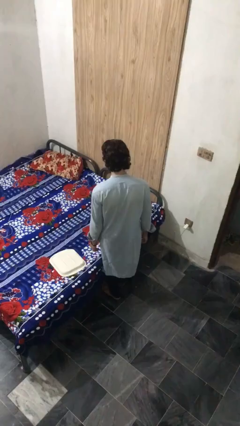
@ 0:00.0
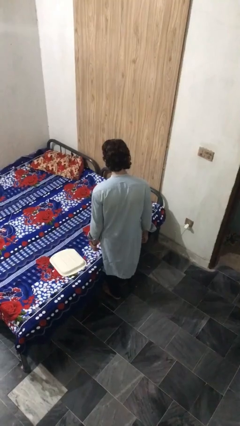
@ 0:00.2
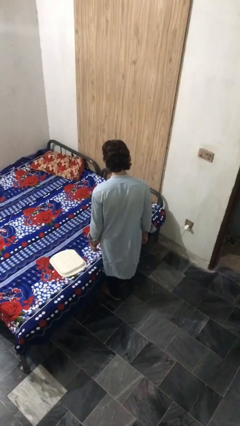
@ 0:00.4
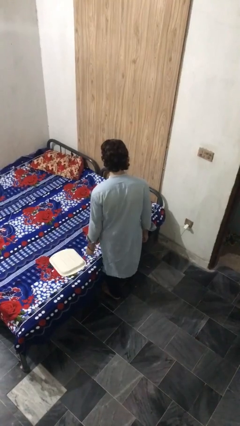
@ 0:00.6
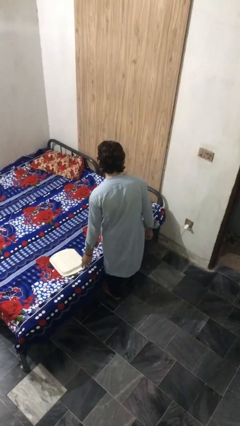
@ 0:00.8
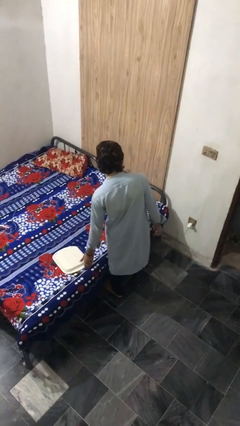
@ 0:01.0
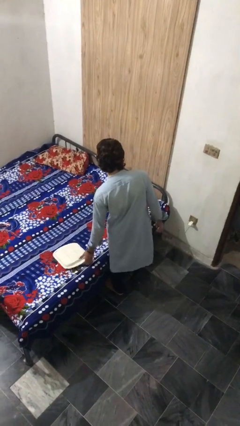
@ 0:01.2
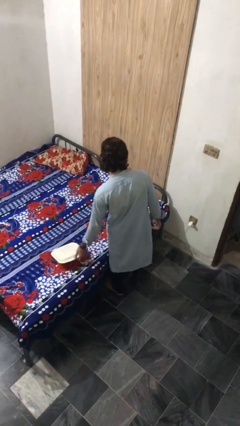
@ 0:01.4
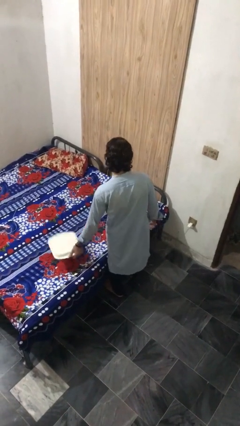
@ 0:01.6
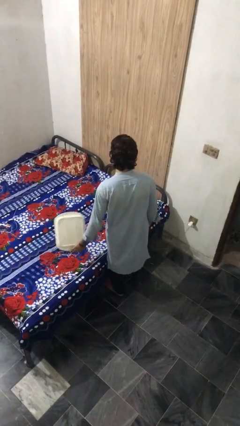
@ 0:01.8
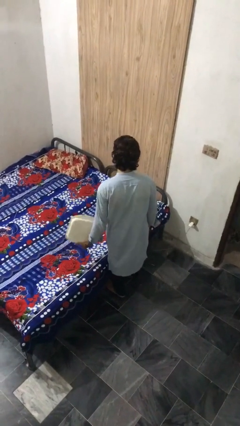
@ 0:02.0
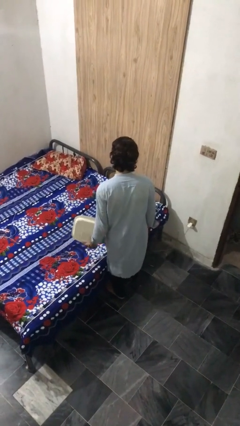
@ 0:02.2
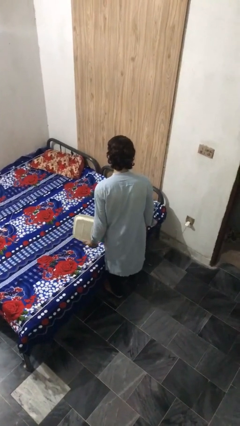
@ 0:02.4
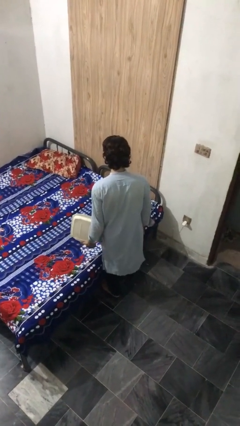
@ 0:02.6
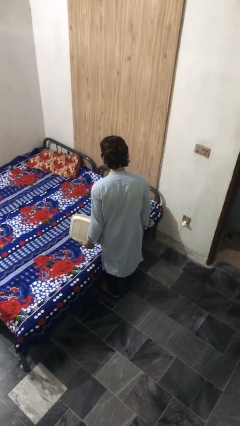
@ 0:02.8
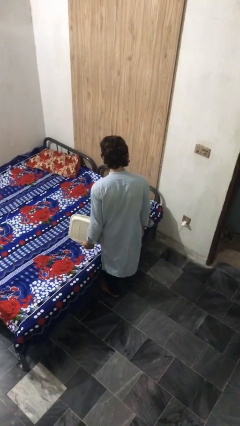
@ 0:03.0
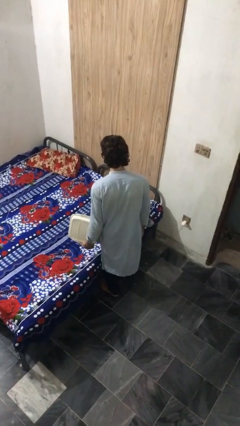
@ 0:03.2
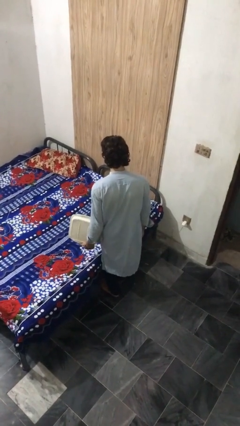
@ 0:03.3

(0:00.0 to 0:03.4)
person picks up object from bed

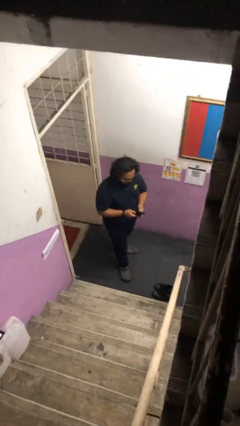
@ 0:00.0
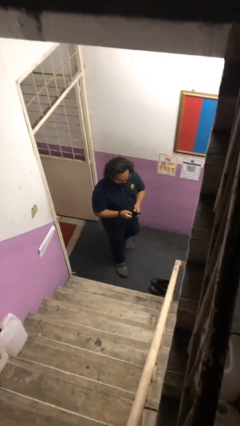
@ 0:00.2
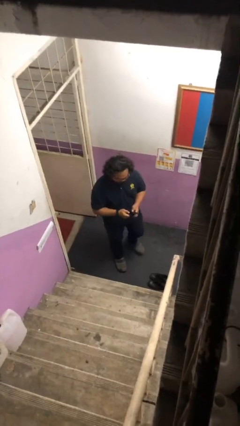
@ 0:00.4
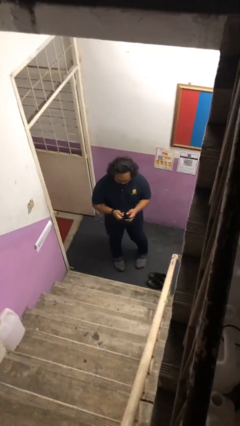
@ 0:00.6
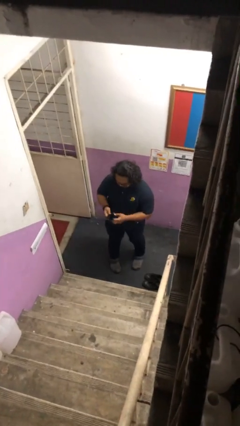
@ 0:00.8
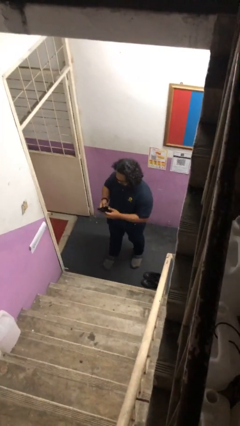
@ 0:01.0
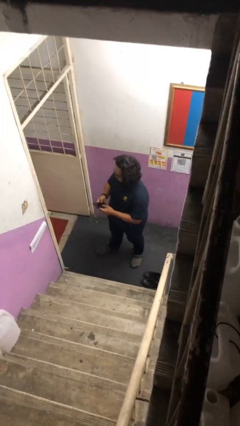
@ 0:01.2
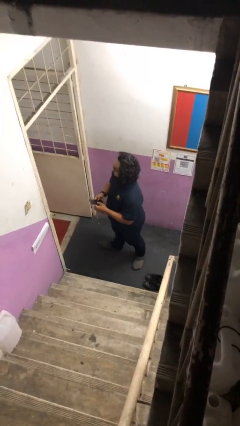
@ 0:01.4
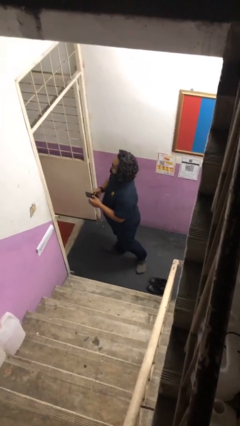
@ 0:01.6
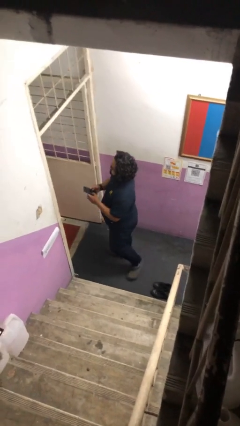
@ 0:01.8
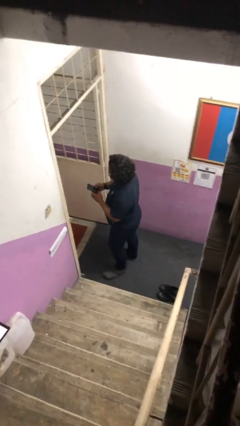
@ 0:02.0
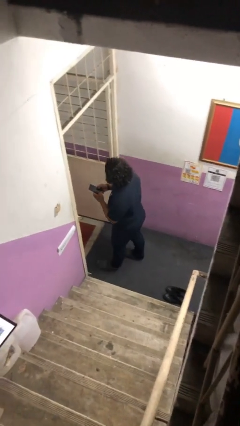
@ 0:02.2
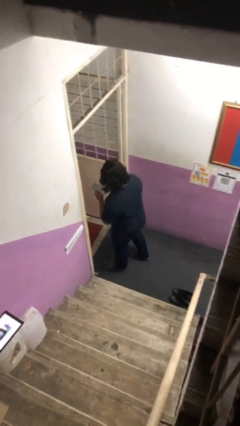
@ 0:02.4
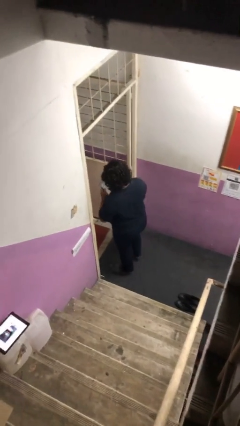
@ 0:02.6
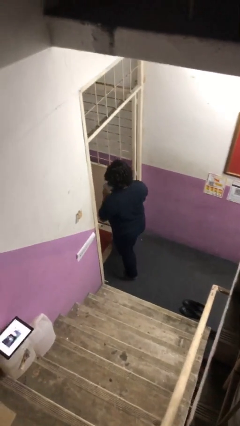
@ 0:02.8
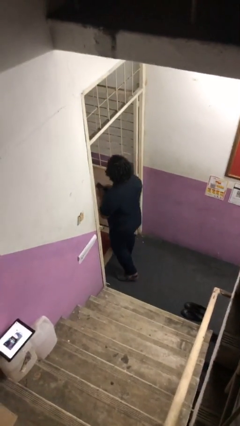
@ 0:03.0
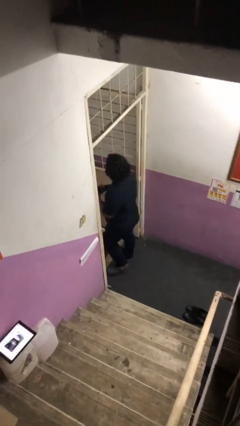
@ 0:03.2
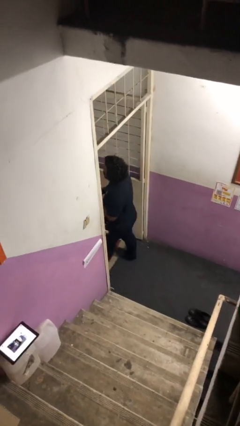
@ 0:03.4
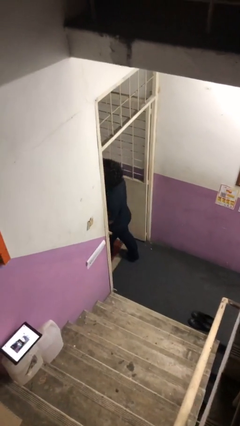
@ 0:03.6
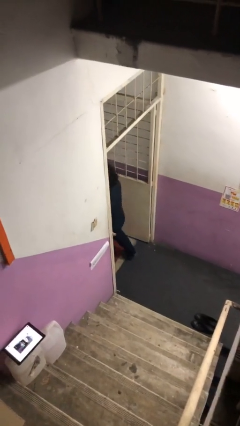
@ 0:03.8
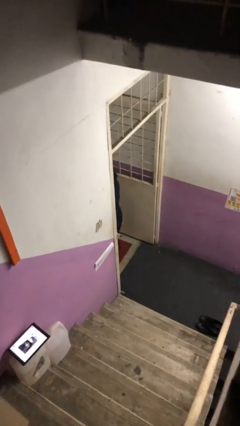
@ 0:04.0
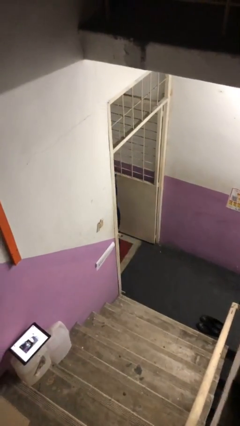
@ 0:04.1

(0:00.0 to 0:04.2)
person exits scene through structure

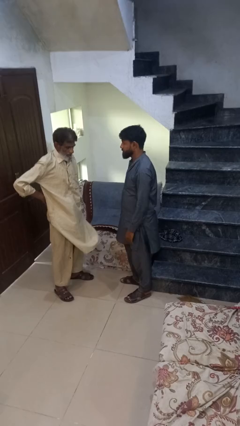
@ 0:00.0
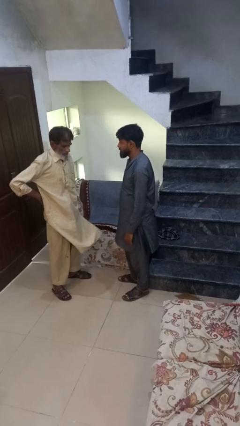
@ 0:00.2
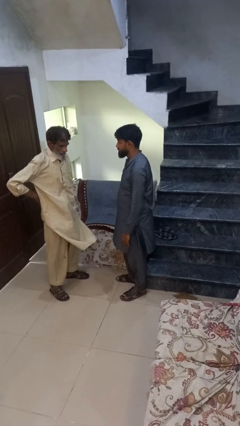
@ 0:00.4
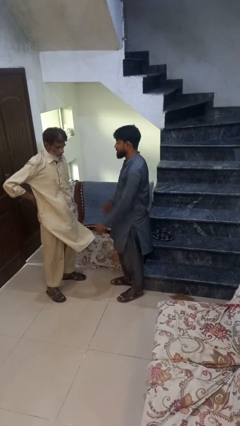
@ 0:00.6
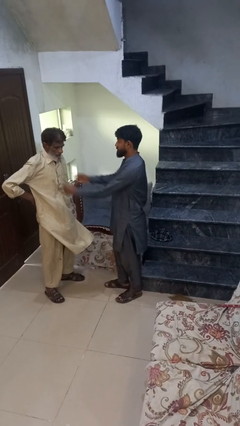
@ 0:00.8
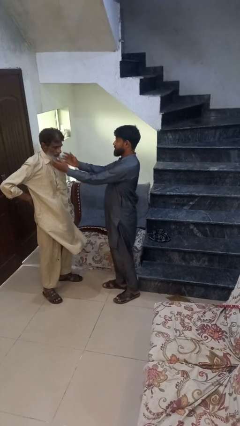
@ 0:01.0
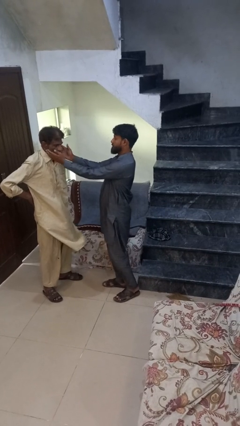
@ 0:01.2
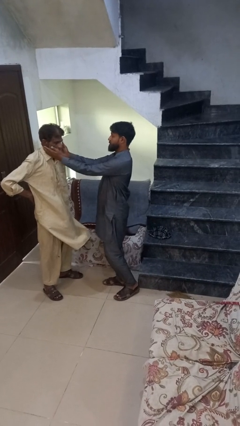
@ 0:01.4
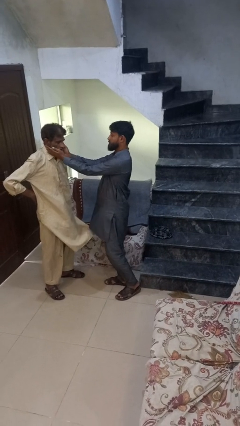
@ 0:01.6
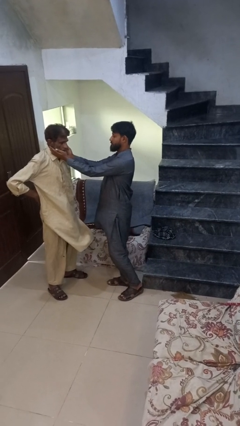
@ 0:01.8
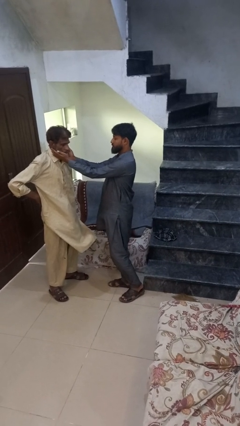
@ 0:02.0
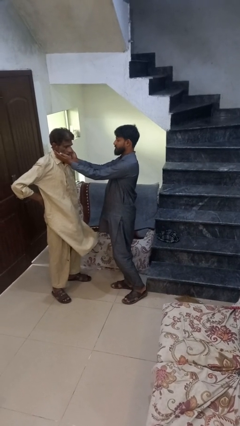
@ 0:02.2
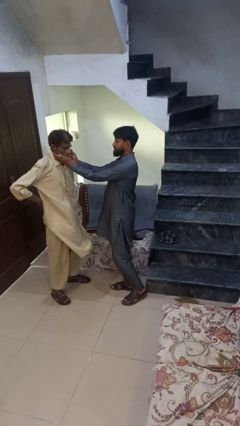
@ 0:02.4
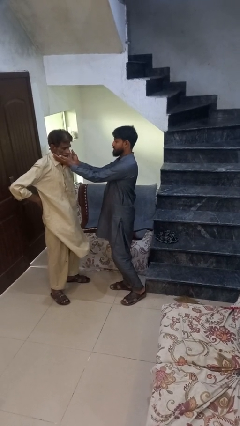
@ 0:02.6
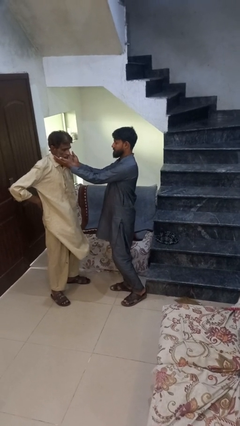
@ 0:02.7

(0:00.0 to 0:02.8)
person touches face of person

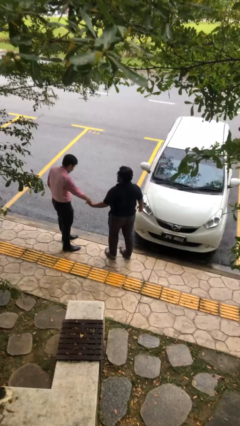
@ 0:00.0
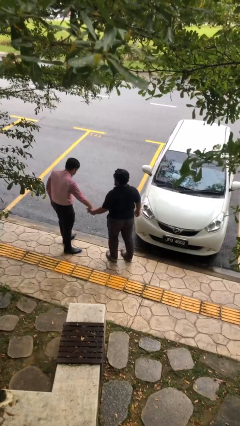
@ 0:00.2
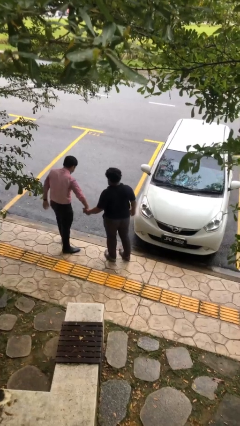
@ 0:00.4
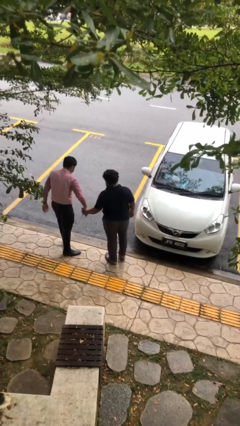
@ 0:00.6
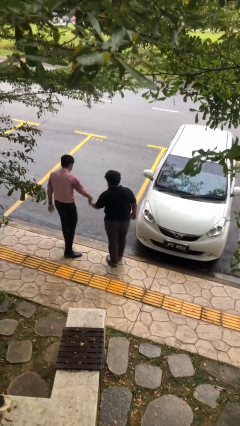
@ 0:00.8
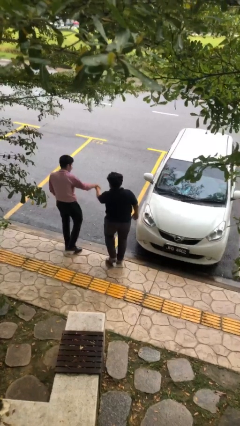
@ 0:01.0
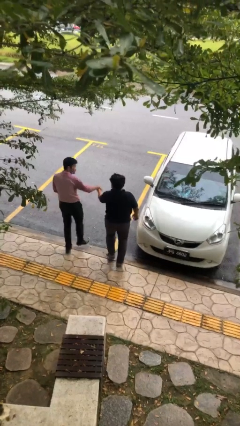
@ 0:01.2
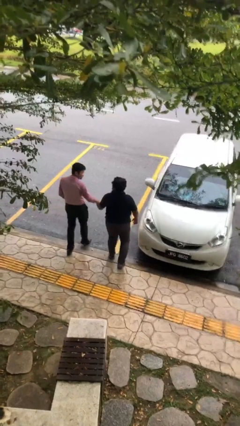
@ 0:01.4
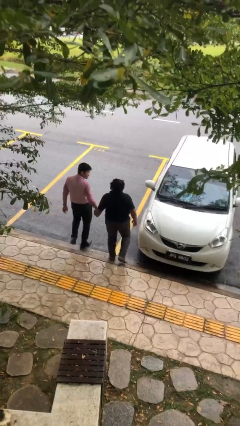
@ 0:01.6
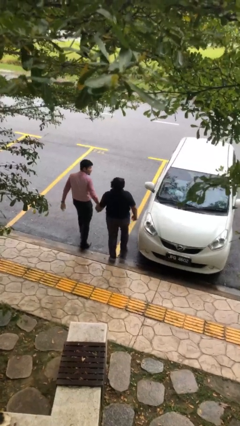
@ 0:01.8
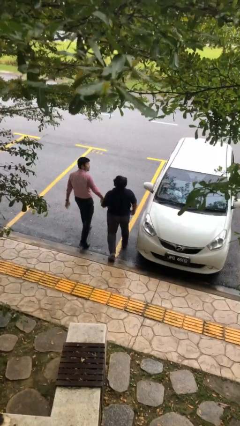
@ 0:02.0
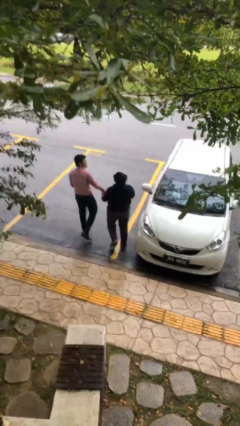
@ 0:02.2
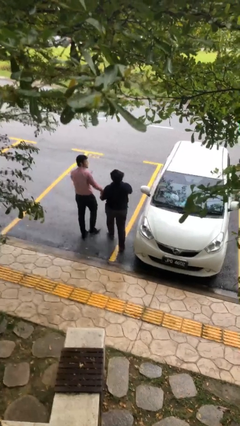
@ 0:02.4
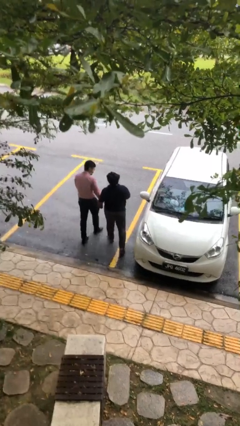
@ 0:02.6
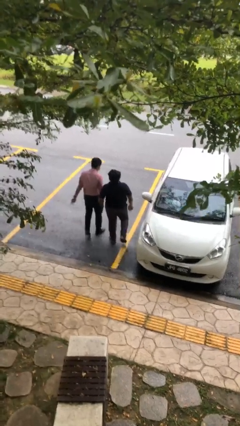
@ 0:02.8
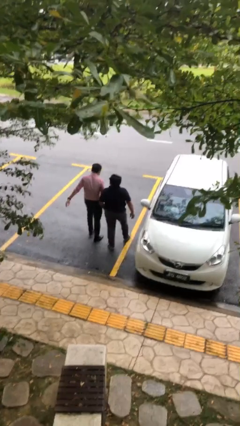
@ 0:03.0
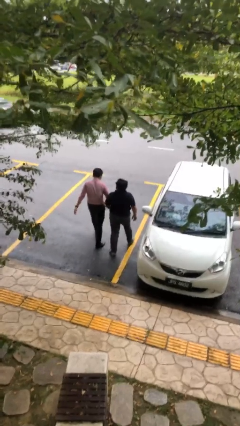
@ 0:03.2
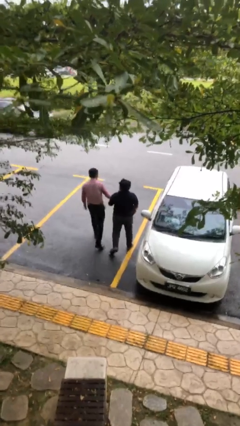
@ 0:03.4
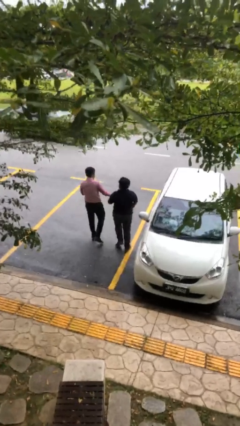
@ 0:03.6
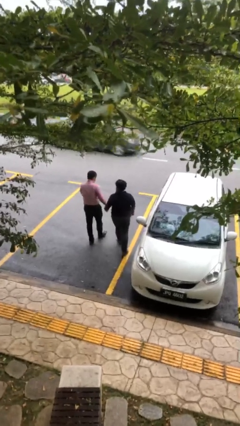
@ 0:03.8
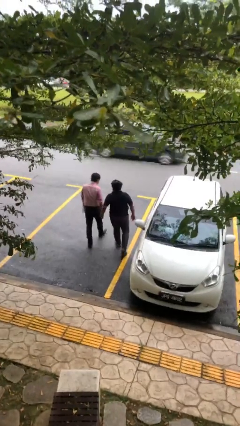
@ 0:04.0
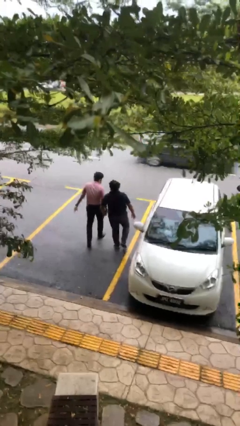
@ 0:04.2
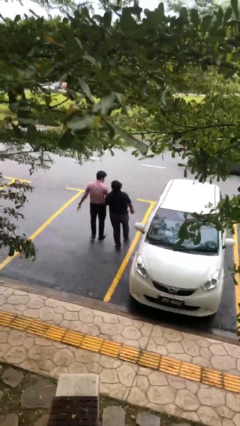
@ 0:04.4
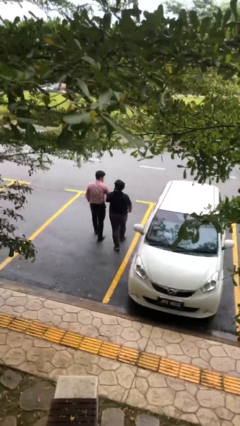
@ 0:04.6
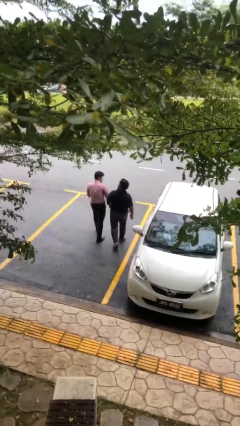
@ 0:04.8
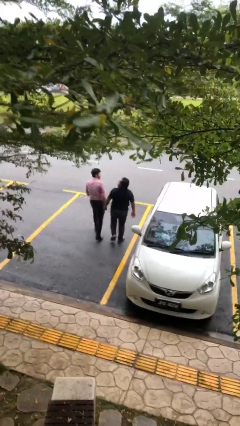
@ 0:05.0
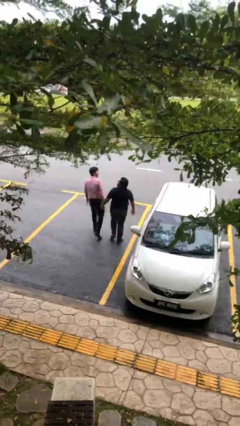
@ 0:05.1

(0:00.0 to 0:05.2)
person holds hand

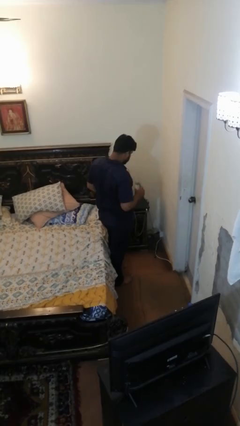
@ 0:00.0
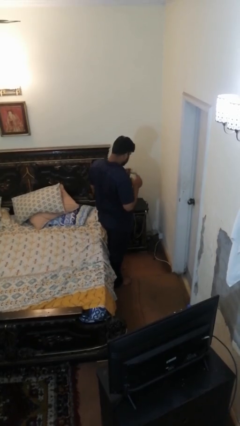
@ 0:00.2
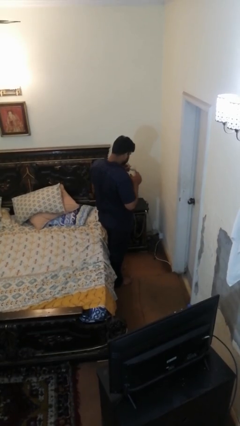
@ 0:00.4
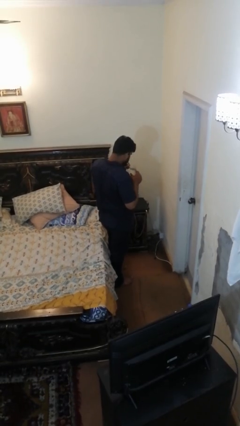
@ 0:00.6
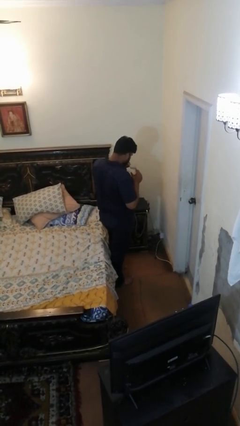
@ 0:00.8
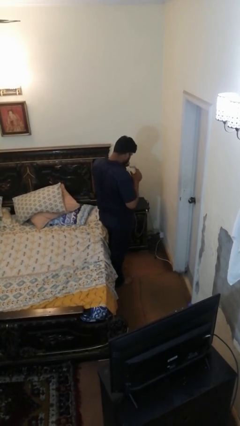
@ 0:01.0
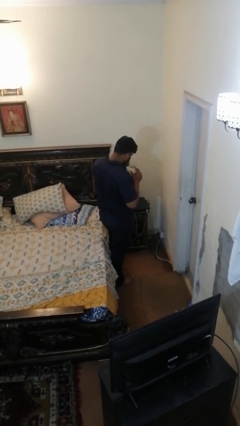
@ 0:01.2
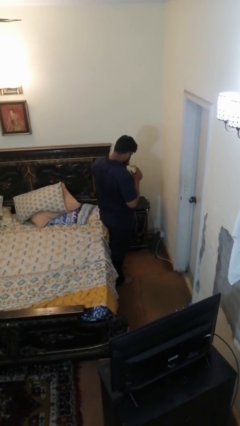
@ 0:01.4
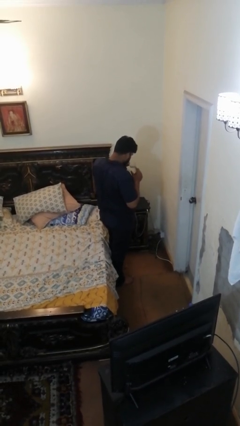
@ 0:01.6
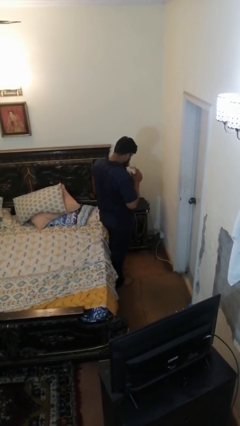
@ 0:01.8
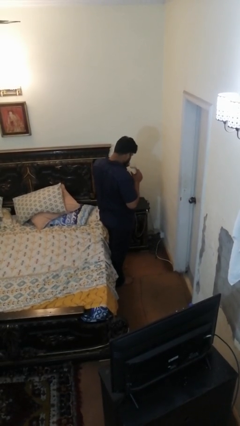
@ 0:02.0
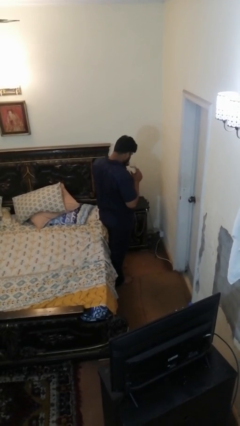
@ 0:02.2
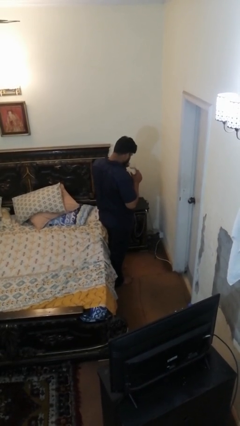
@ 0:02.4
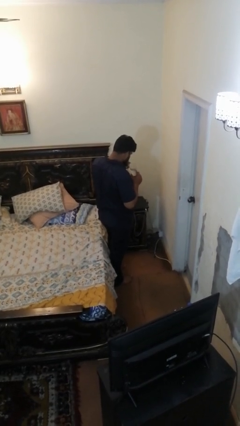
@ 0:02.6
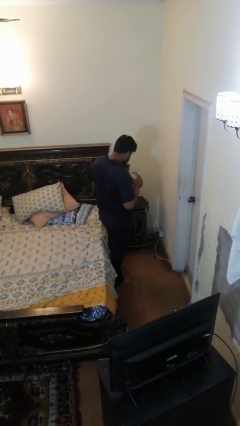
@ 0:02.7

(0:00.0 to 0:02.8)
person drinks from straw
